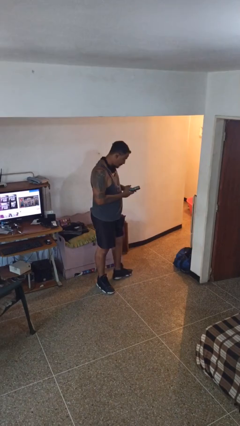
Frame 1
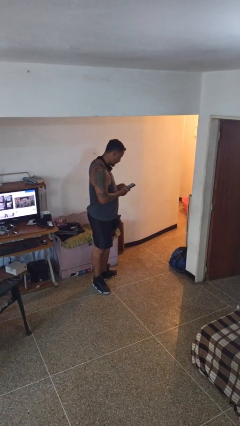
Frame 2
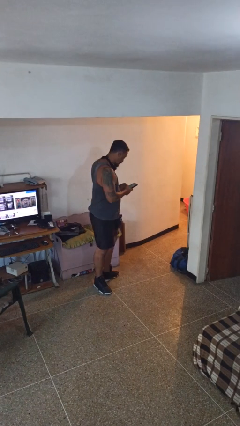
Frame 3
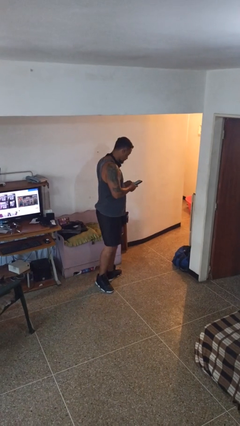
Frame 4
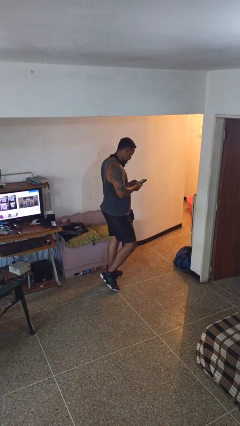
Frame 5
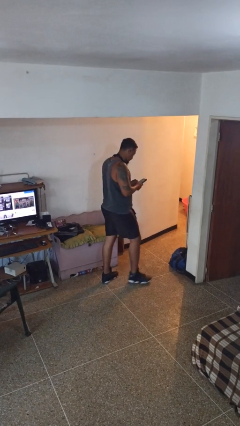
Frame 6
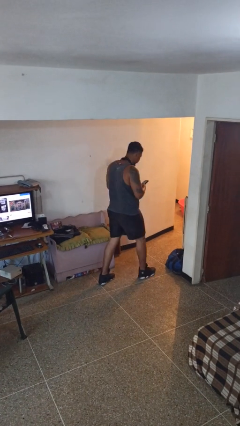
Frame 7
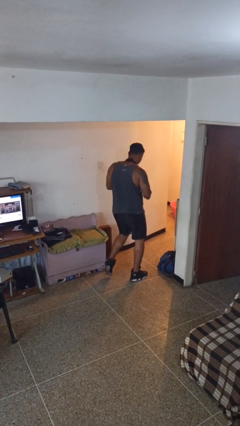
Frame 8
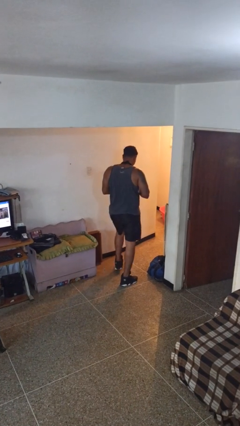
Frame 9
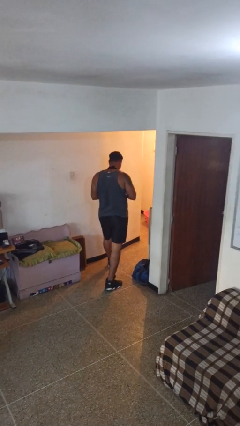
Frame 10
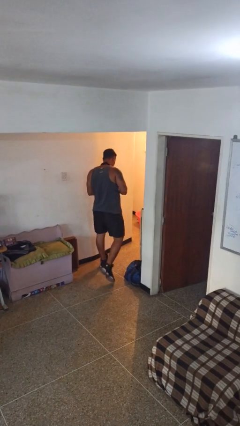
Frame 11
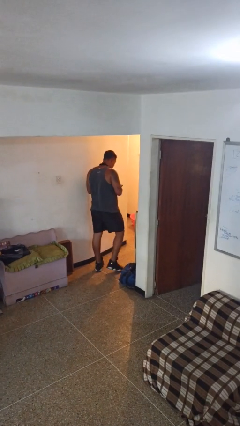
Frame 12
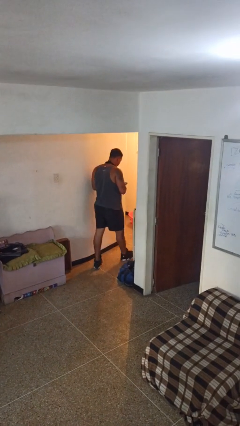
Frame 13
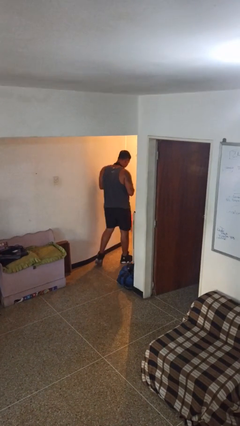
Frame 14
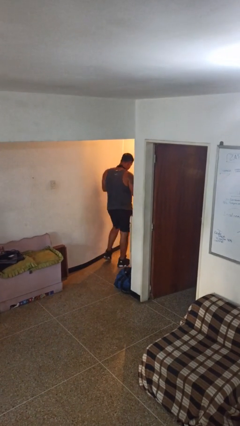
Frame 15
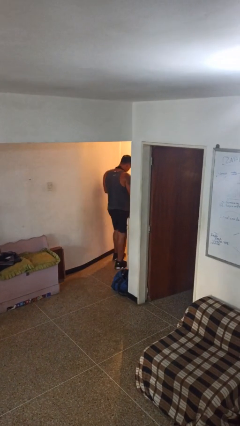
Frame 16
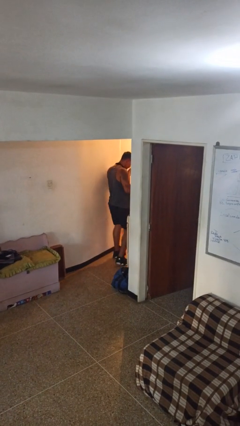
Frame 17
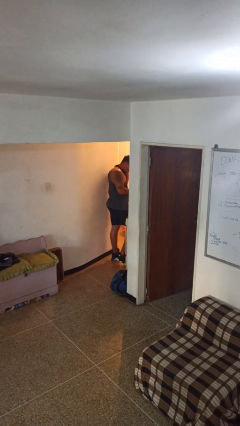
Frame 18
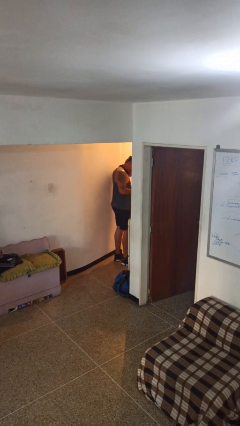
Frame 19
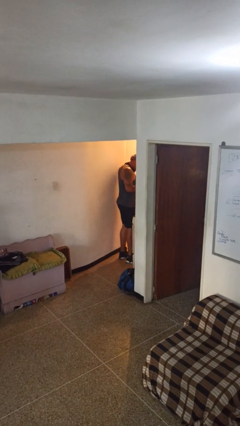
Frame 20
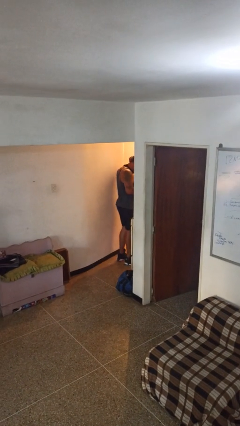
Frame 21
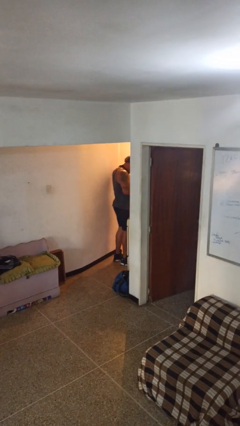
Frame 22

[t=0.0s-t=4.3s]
person exits scene through structure

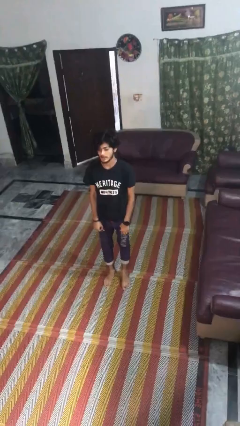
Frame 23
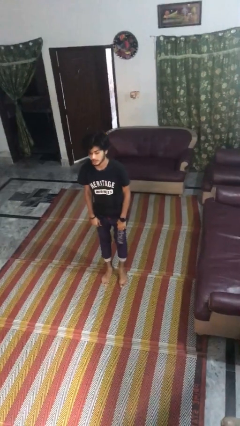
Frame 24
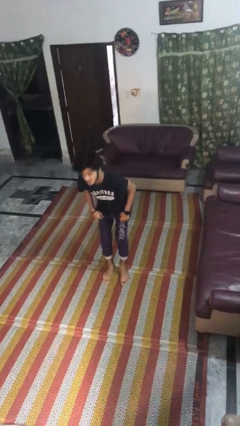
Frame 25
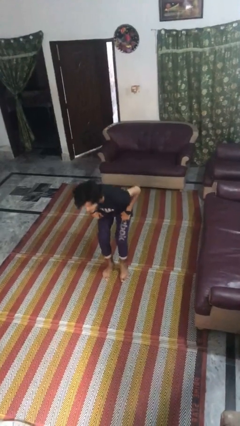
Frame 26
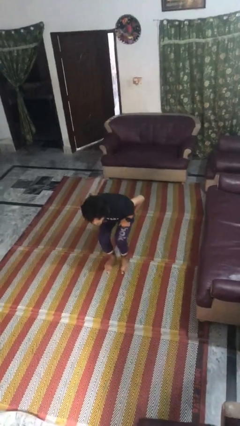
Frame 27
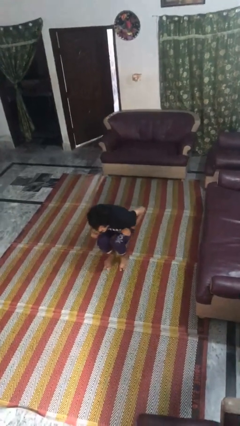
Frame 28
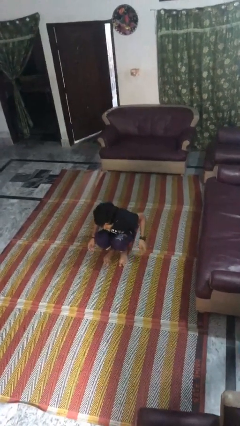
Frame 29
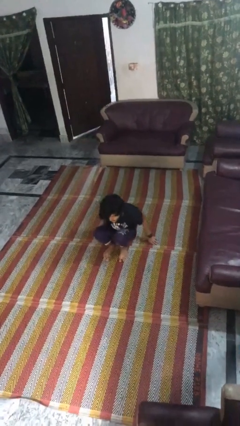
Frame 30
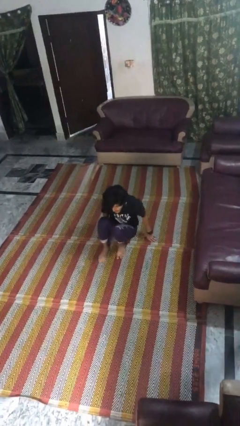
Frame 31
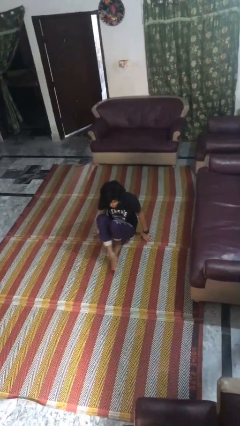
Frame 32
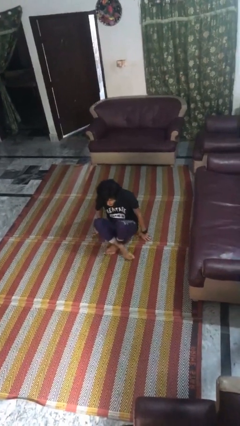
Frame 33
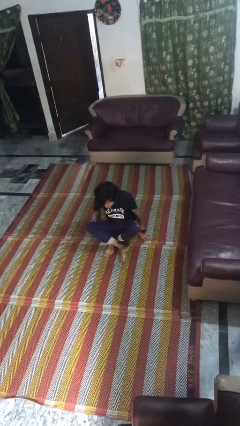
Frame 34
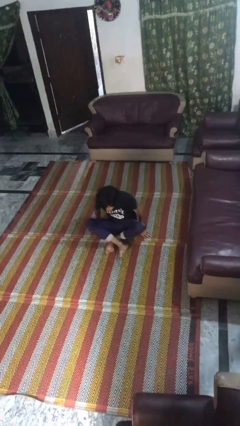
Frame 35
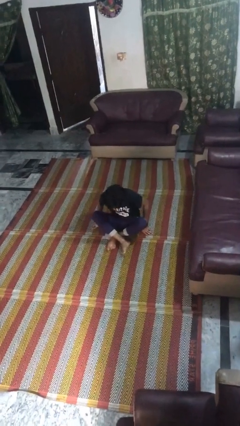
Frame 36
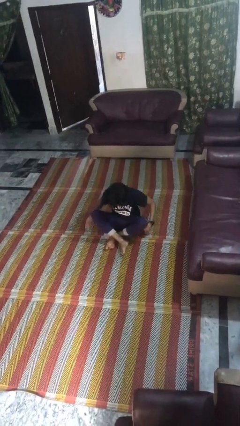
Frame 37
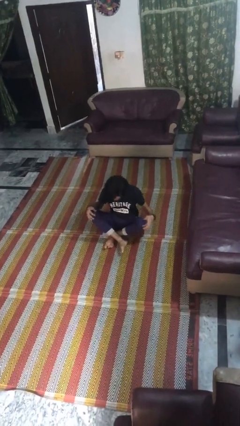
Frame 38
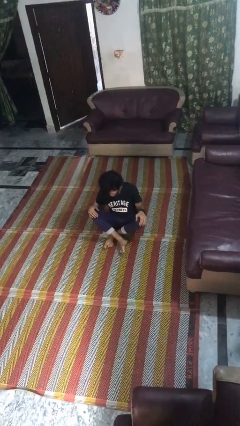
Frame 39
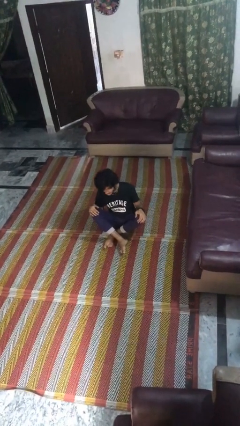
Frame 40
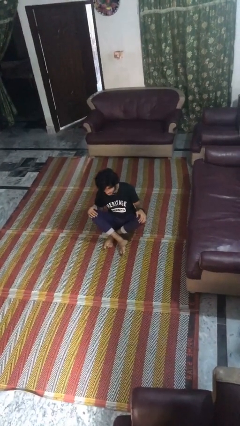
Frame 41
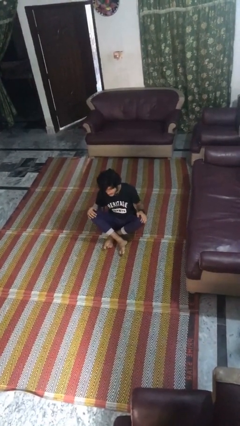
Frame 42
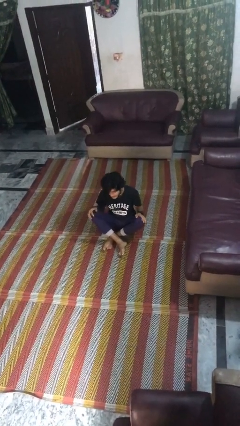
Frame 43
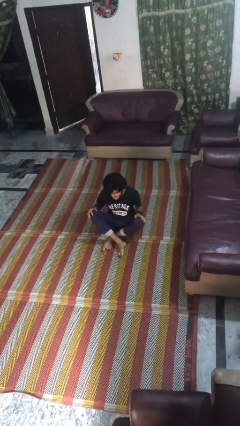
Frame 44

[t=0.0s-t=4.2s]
person sits crisscross

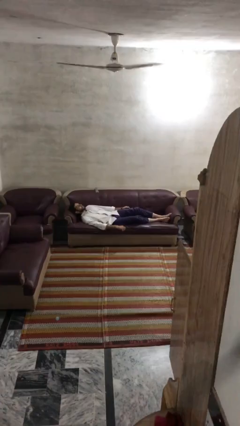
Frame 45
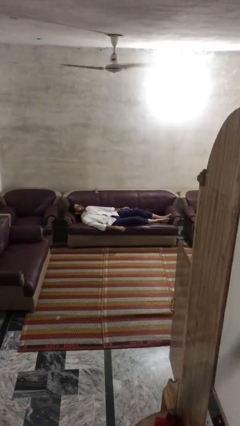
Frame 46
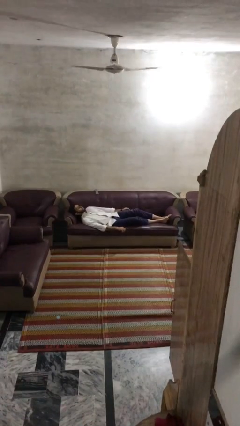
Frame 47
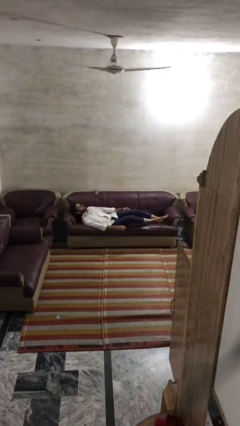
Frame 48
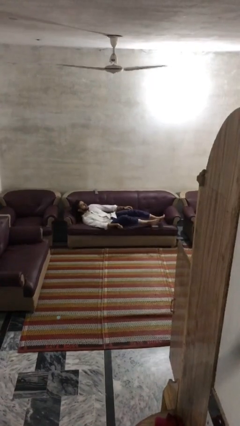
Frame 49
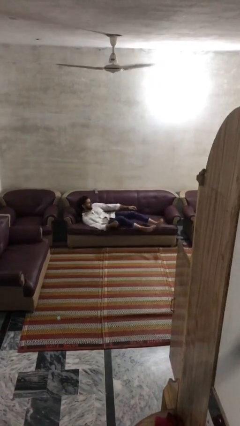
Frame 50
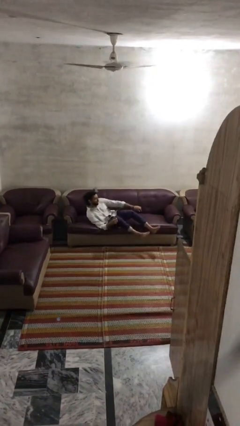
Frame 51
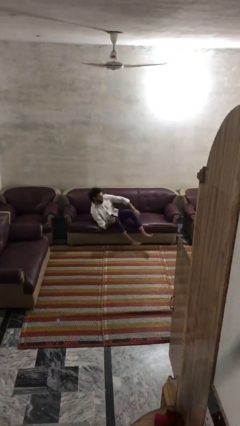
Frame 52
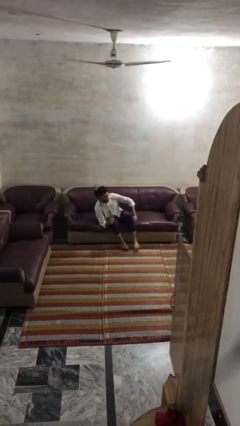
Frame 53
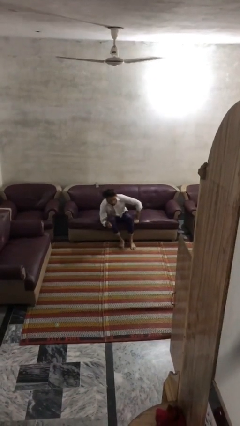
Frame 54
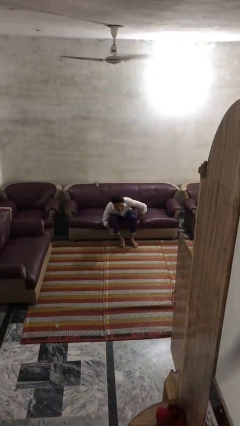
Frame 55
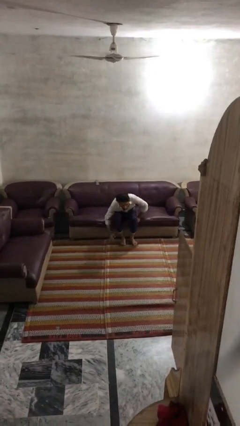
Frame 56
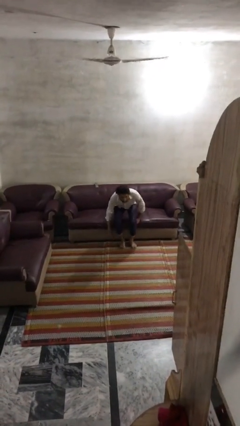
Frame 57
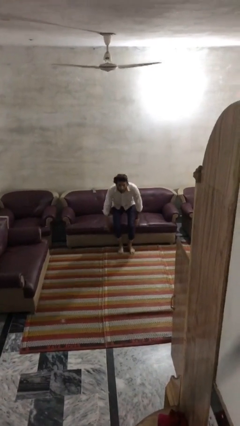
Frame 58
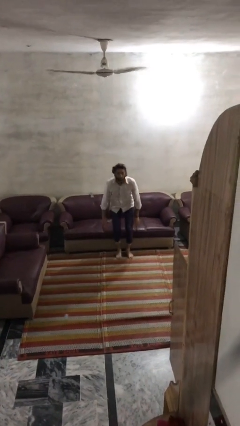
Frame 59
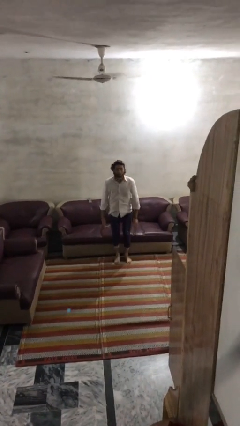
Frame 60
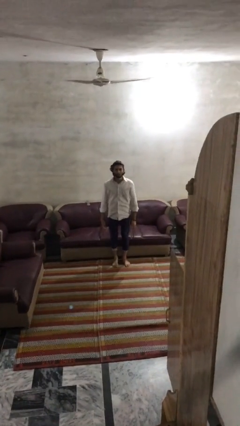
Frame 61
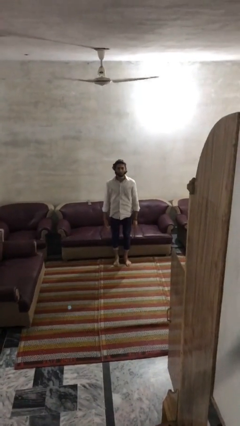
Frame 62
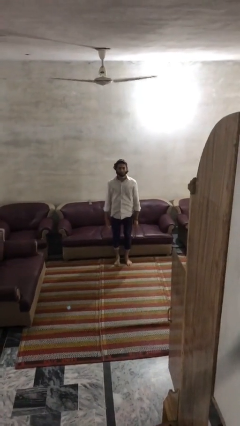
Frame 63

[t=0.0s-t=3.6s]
person stands up

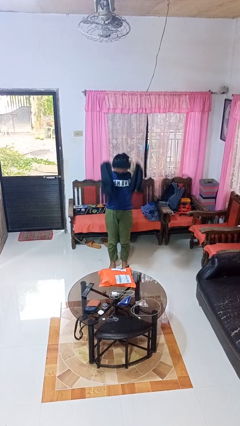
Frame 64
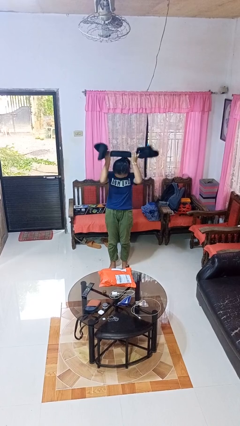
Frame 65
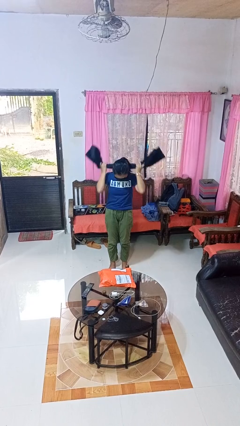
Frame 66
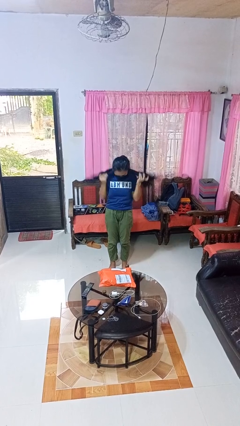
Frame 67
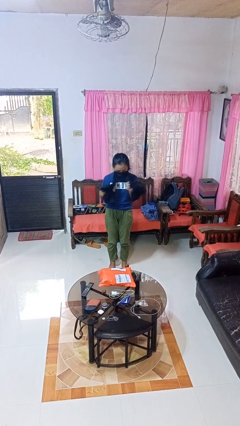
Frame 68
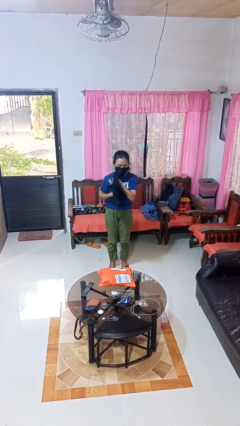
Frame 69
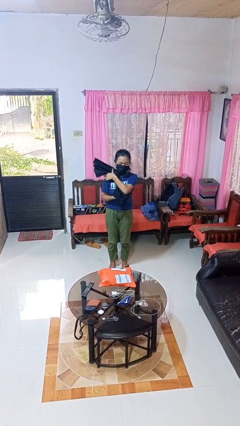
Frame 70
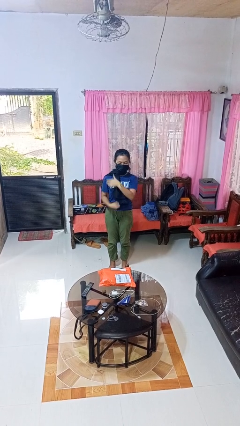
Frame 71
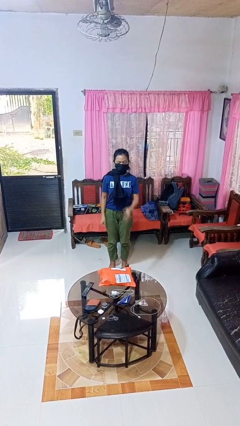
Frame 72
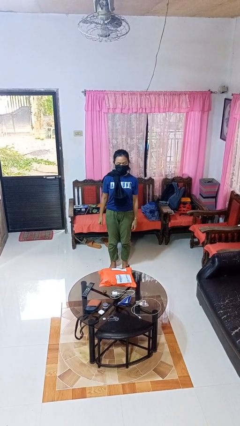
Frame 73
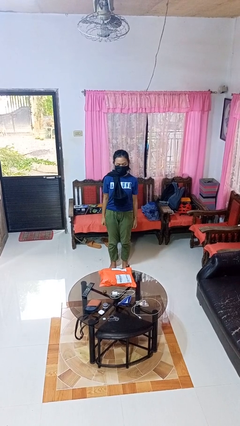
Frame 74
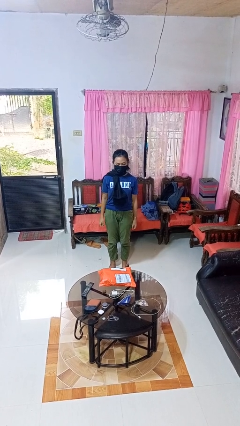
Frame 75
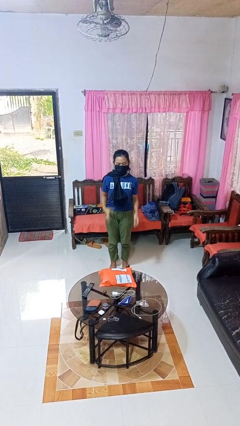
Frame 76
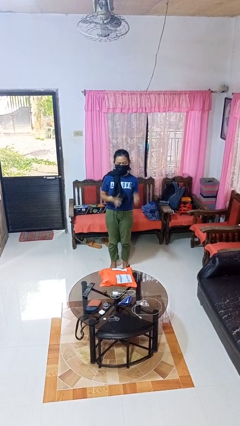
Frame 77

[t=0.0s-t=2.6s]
person puts on scarf

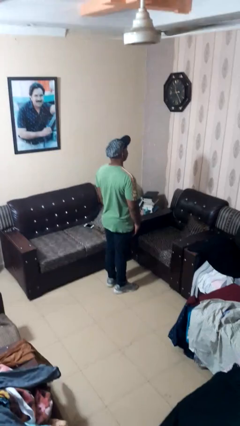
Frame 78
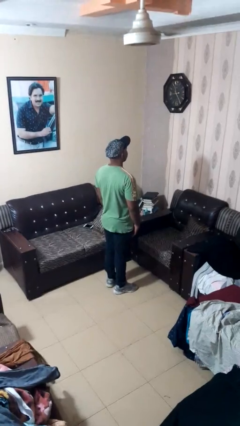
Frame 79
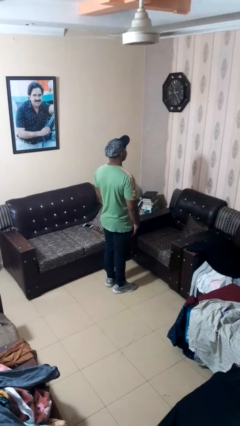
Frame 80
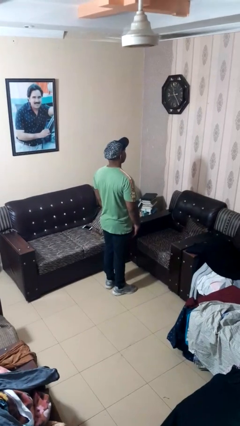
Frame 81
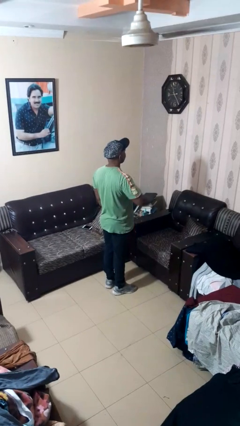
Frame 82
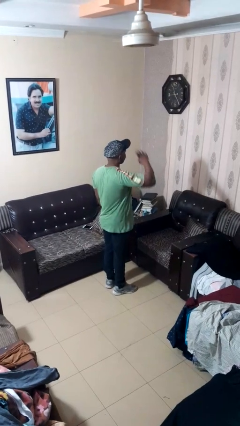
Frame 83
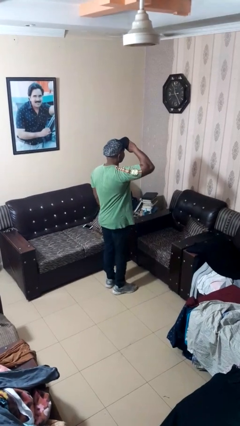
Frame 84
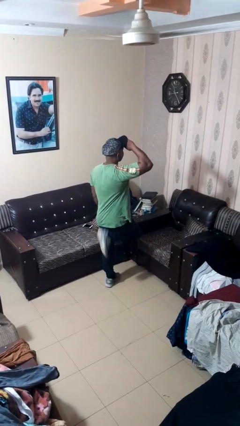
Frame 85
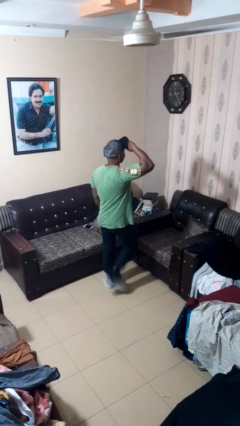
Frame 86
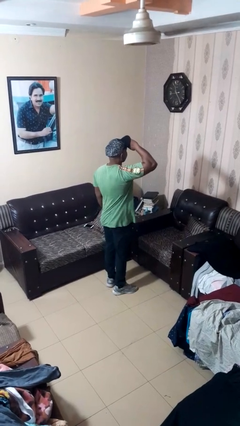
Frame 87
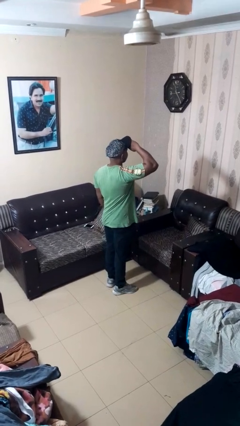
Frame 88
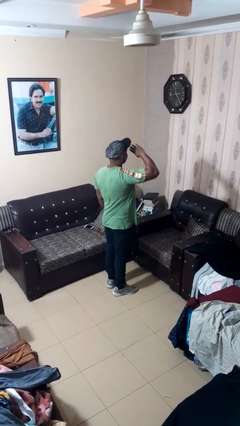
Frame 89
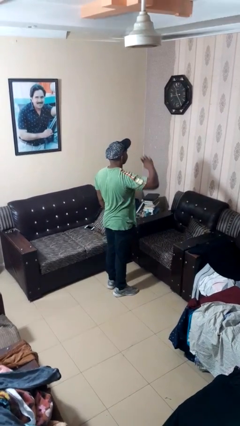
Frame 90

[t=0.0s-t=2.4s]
person salutes

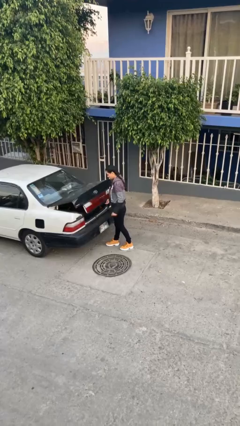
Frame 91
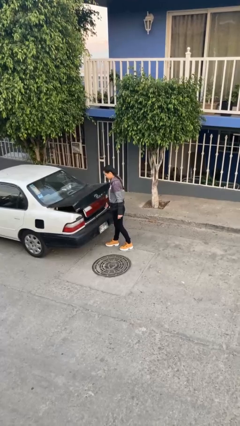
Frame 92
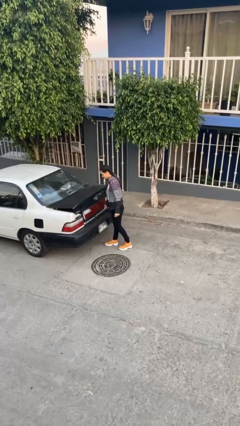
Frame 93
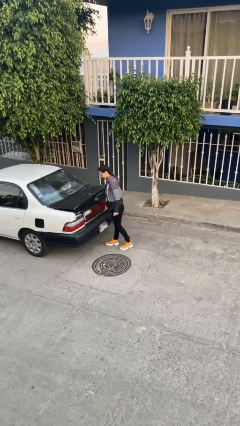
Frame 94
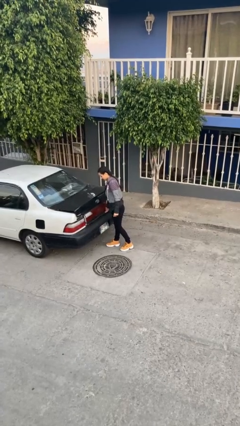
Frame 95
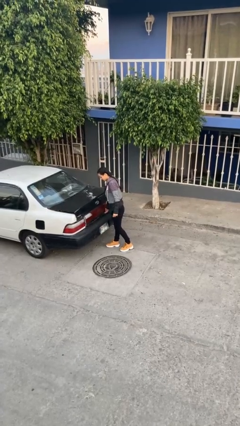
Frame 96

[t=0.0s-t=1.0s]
person closes car trunk
